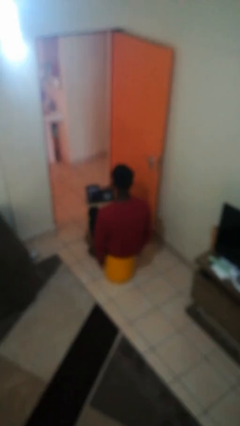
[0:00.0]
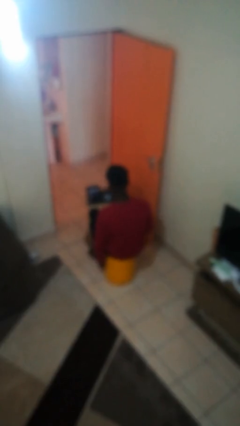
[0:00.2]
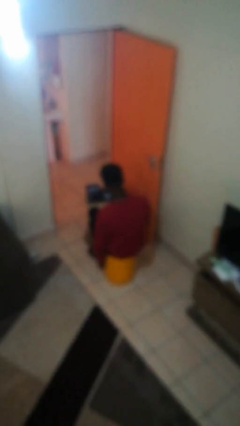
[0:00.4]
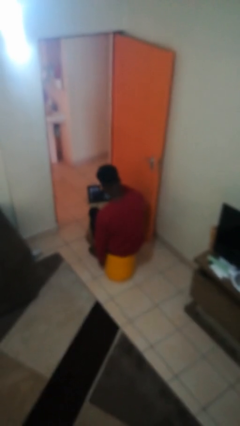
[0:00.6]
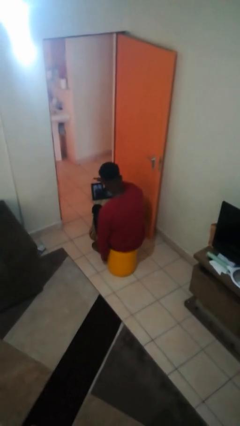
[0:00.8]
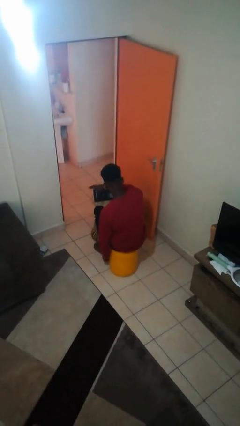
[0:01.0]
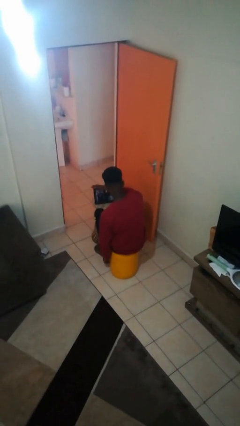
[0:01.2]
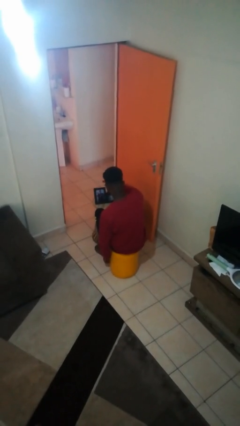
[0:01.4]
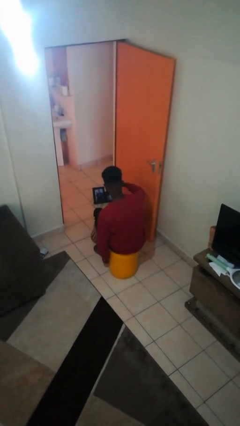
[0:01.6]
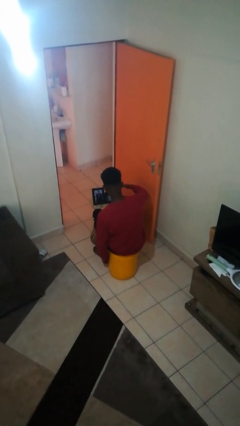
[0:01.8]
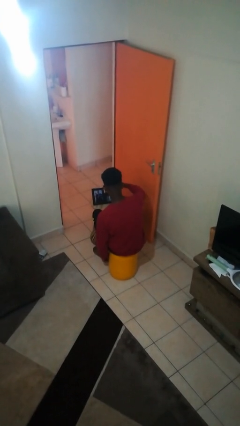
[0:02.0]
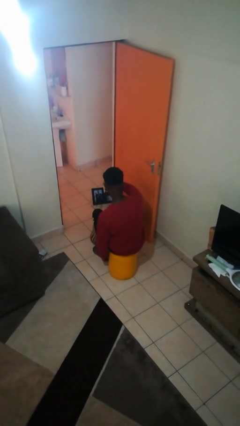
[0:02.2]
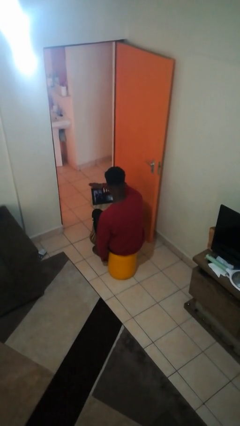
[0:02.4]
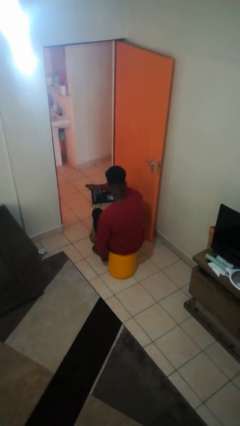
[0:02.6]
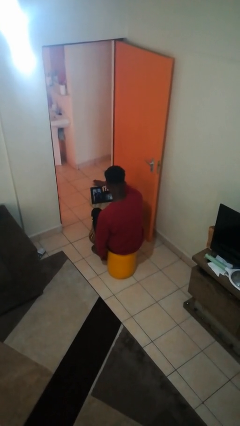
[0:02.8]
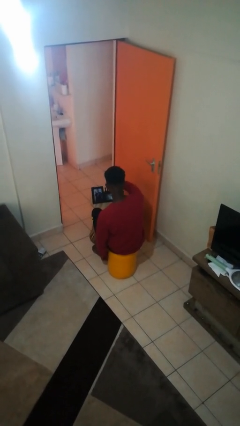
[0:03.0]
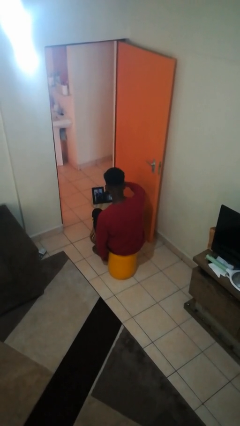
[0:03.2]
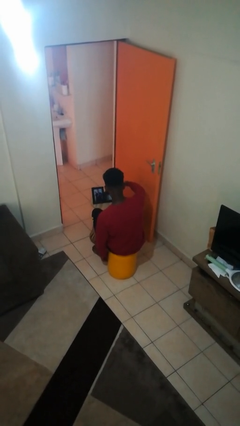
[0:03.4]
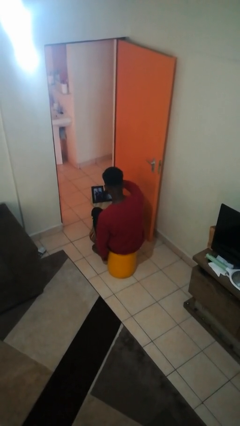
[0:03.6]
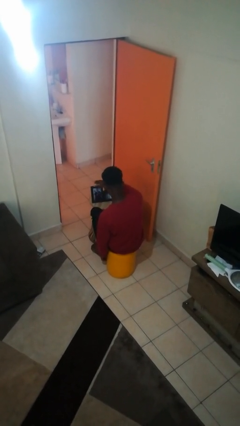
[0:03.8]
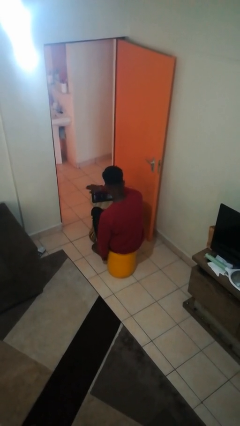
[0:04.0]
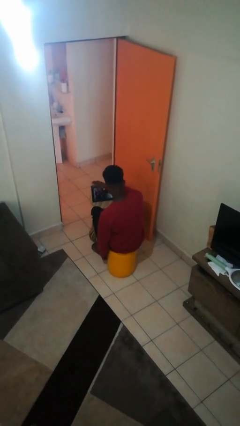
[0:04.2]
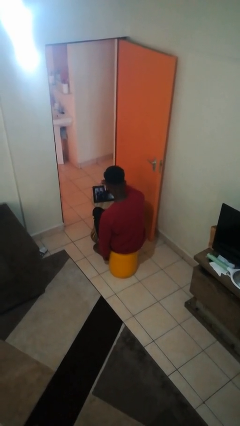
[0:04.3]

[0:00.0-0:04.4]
person waves hand over object

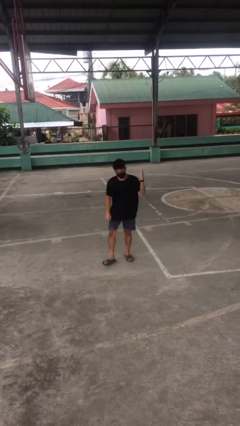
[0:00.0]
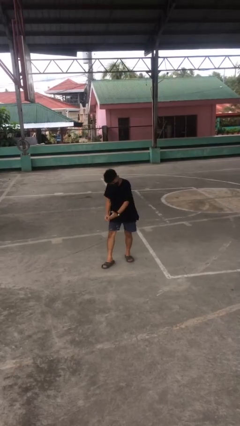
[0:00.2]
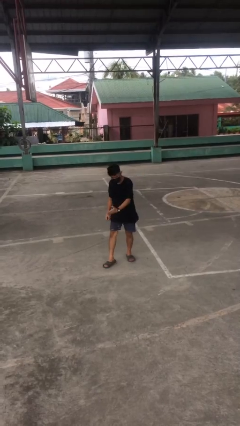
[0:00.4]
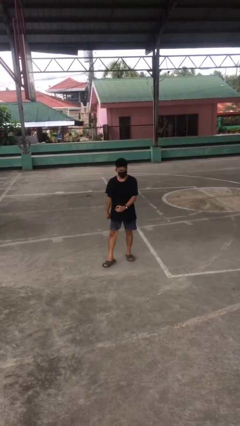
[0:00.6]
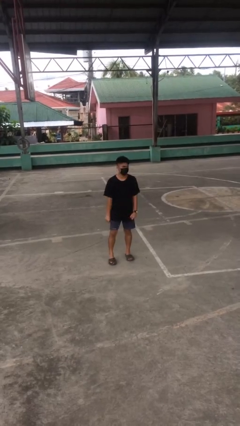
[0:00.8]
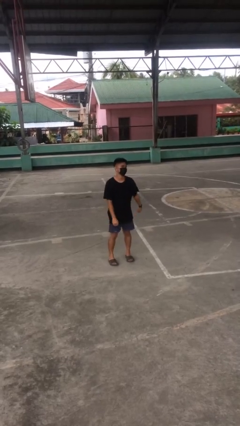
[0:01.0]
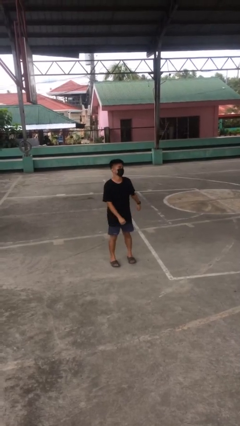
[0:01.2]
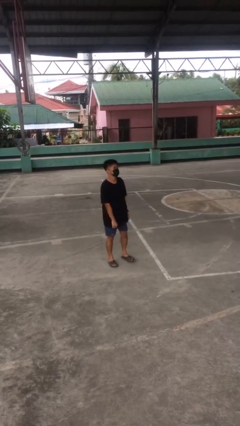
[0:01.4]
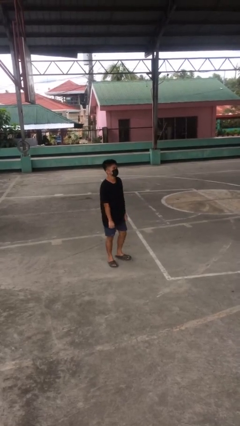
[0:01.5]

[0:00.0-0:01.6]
person karate chop

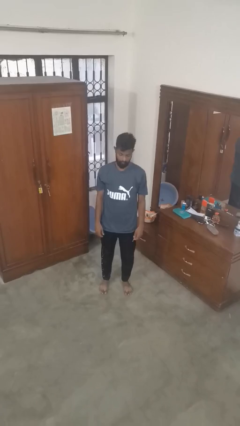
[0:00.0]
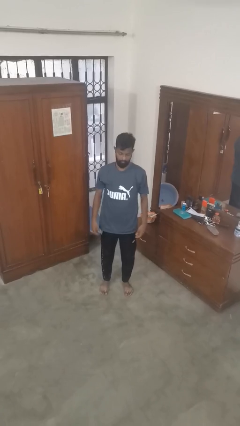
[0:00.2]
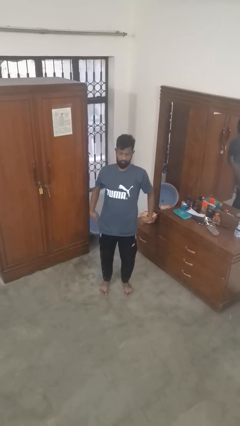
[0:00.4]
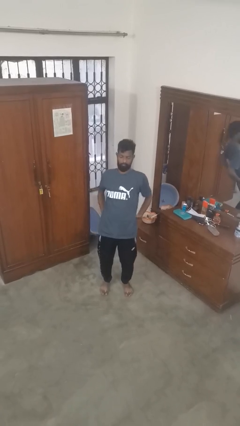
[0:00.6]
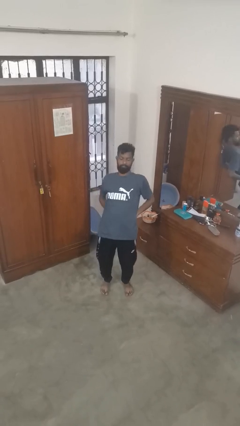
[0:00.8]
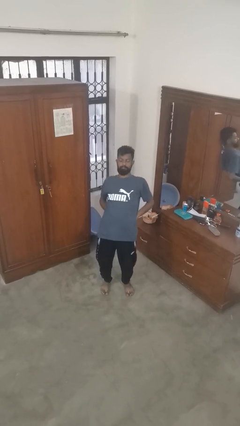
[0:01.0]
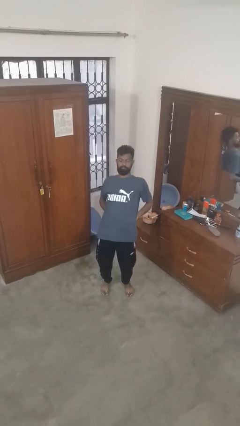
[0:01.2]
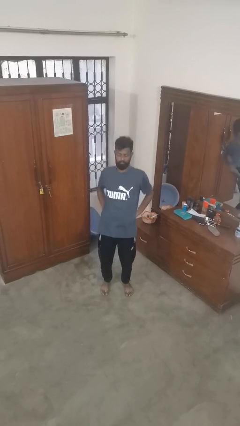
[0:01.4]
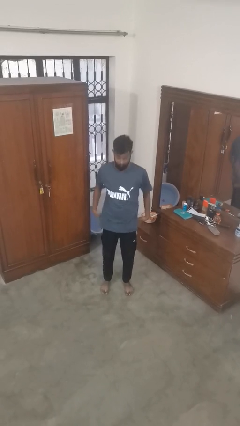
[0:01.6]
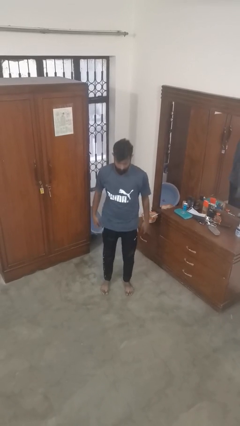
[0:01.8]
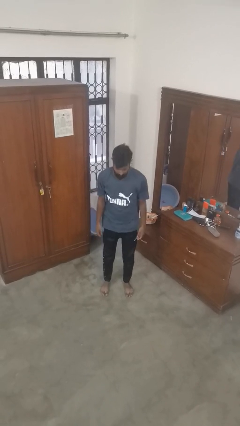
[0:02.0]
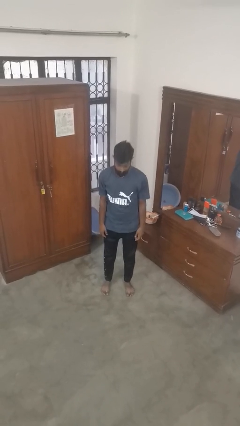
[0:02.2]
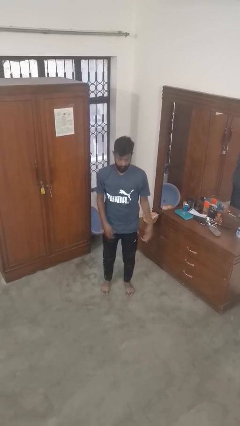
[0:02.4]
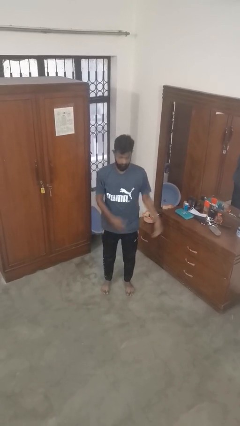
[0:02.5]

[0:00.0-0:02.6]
person stretches back

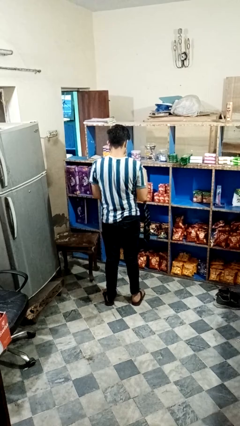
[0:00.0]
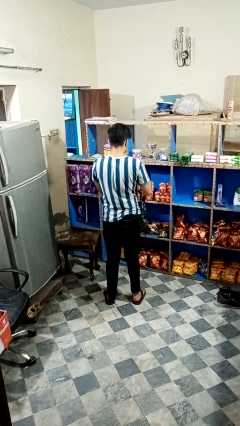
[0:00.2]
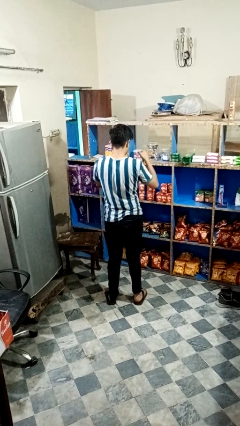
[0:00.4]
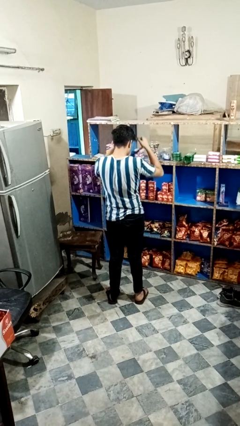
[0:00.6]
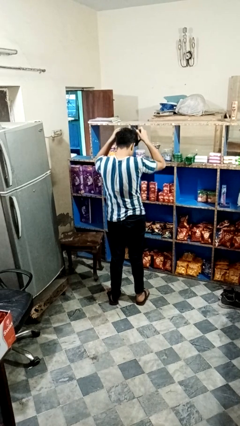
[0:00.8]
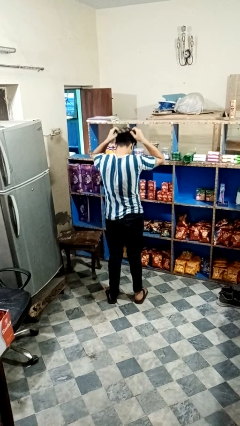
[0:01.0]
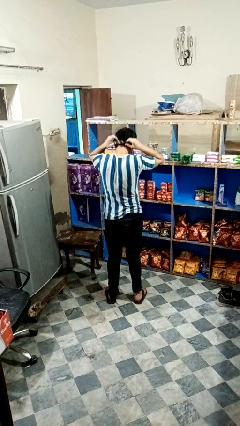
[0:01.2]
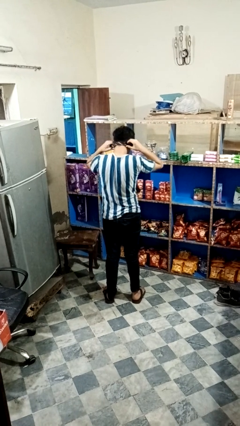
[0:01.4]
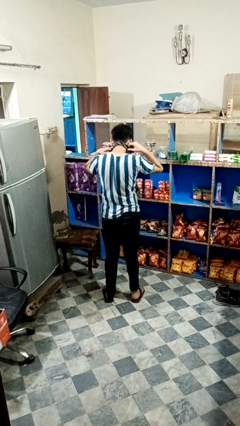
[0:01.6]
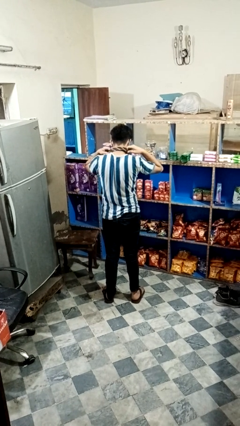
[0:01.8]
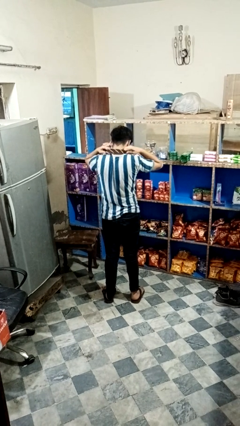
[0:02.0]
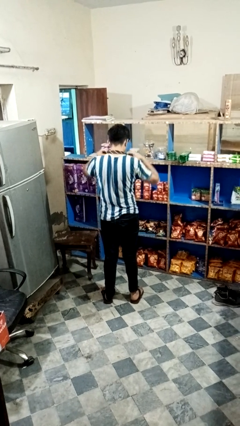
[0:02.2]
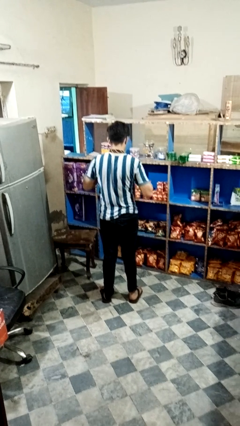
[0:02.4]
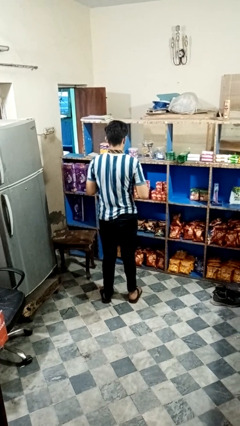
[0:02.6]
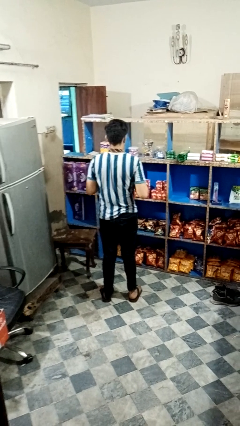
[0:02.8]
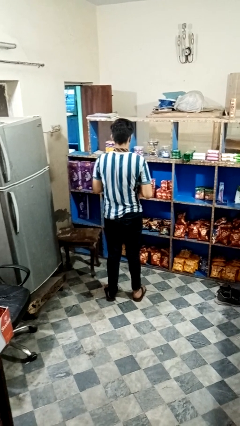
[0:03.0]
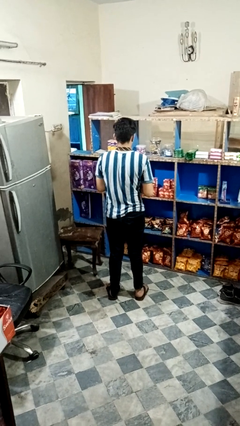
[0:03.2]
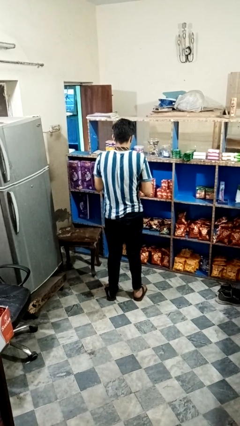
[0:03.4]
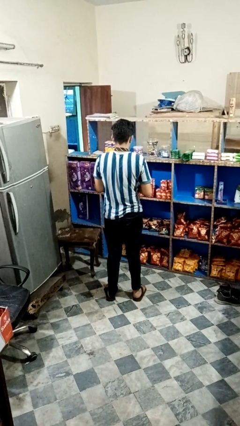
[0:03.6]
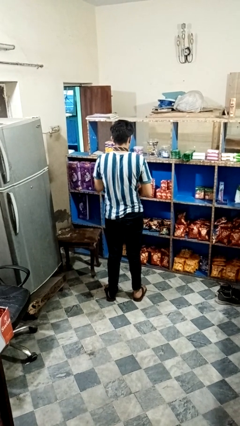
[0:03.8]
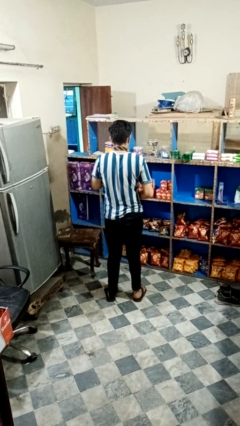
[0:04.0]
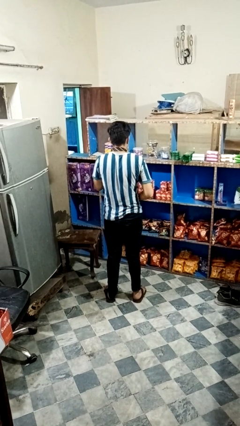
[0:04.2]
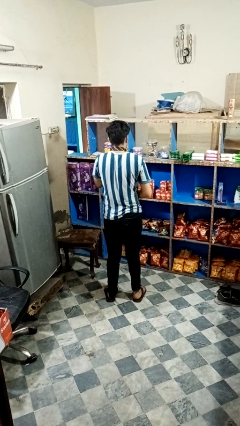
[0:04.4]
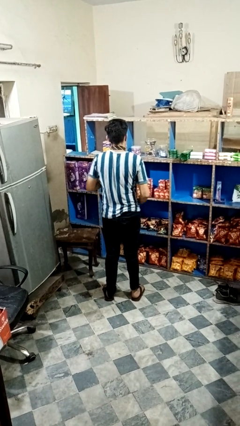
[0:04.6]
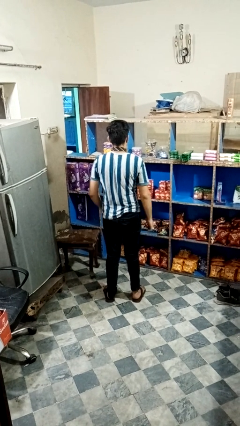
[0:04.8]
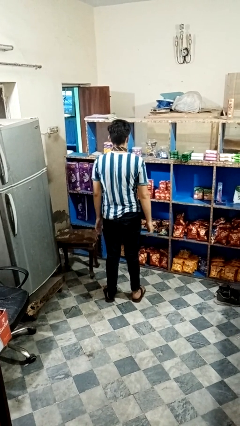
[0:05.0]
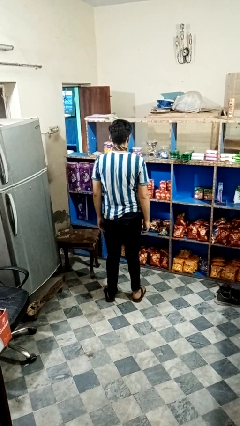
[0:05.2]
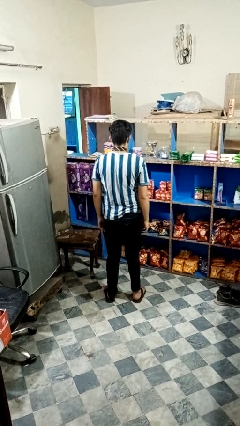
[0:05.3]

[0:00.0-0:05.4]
person puts on necktie

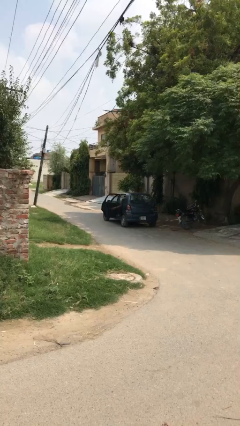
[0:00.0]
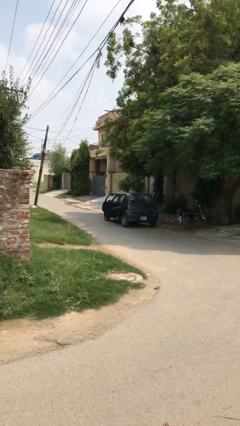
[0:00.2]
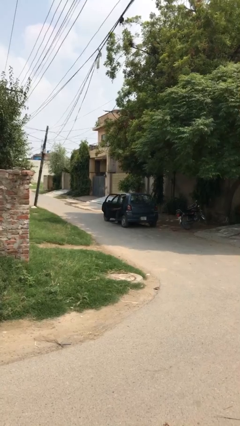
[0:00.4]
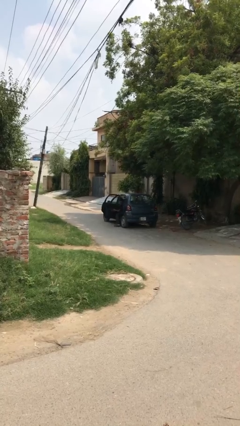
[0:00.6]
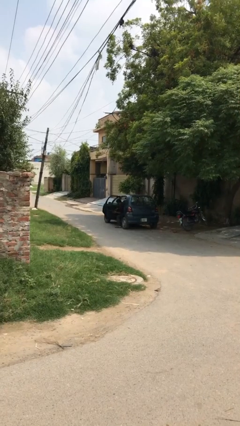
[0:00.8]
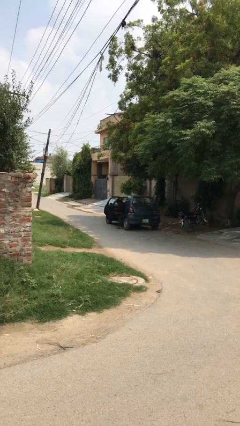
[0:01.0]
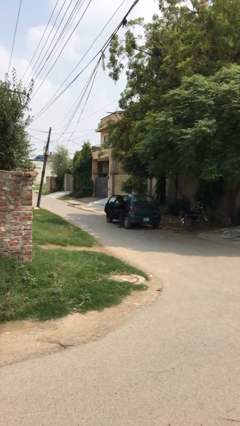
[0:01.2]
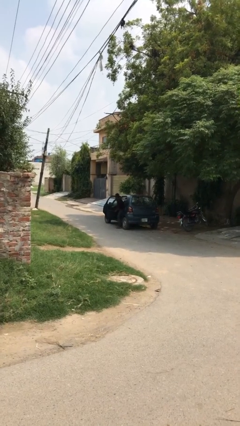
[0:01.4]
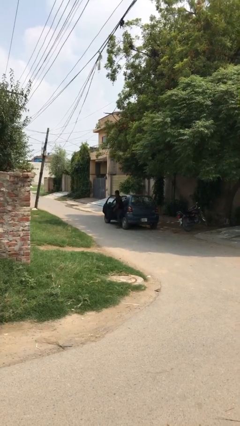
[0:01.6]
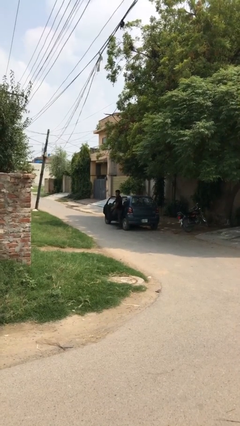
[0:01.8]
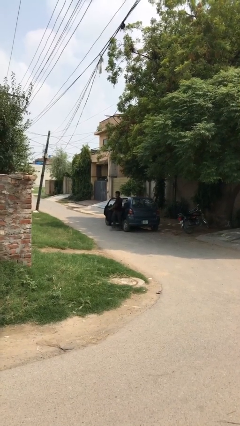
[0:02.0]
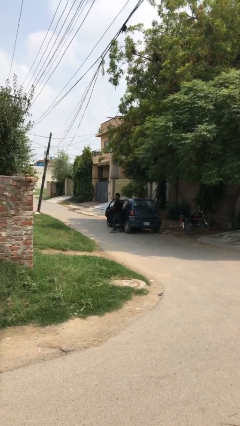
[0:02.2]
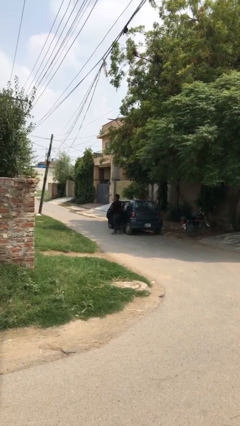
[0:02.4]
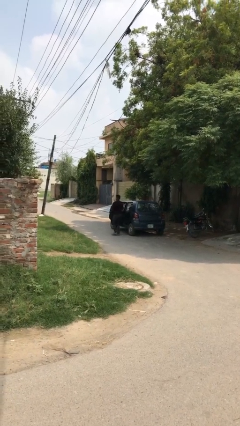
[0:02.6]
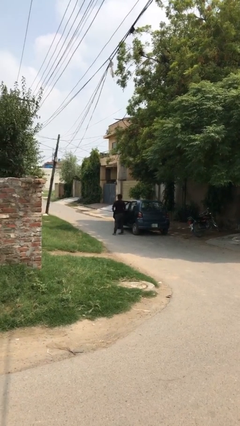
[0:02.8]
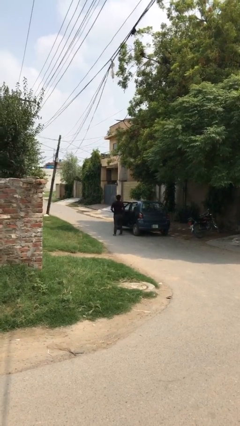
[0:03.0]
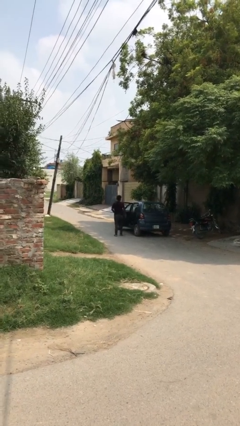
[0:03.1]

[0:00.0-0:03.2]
person exits car

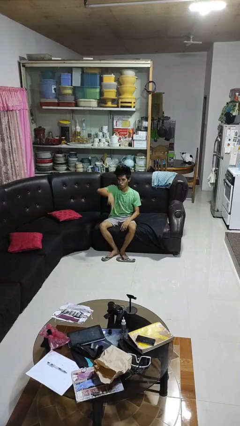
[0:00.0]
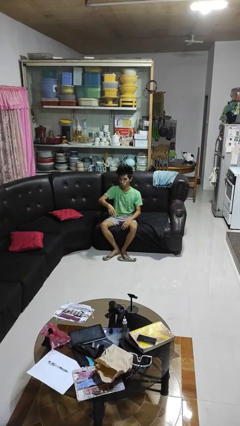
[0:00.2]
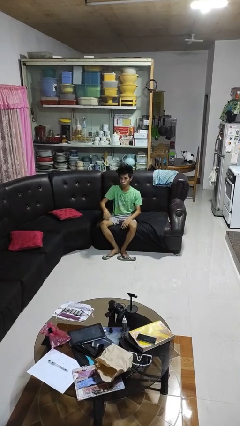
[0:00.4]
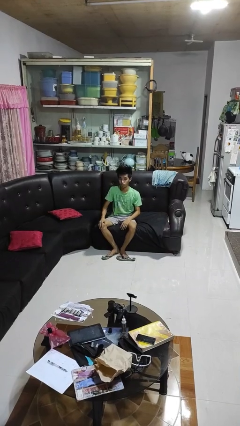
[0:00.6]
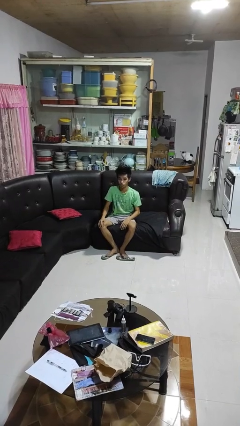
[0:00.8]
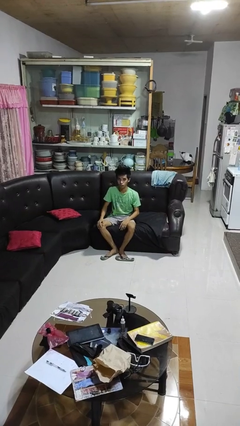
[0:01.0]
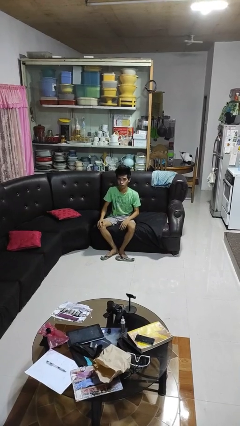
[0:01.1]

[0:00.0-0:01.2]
person gestures swipe down
